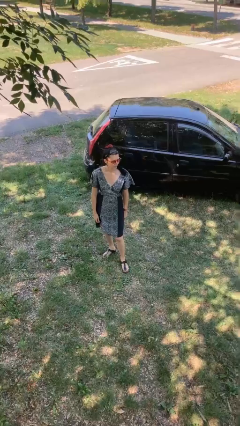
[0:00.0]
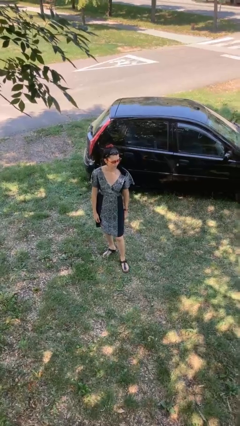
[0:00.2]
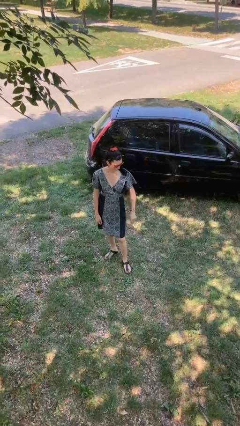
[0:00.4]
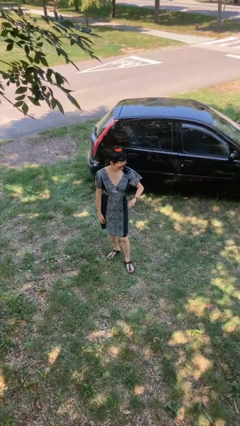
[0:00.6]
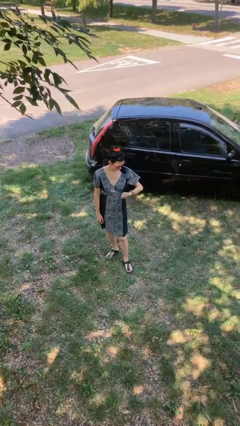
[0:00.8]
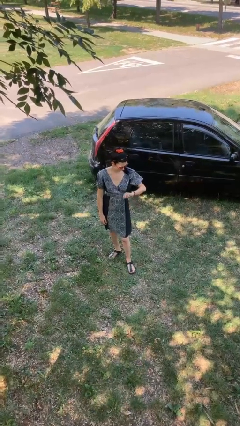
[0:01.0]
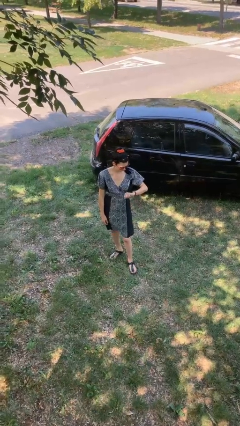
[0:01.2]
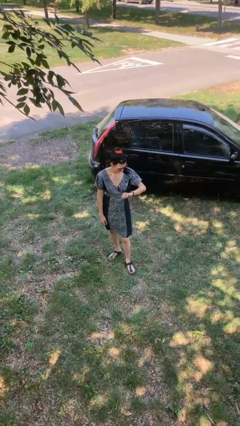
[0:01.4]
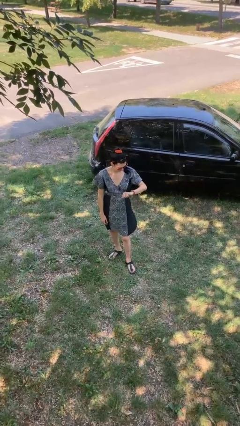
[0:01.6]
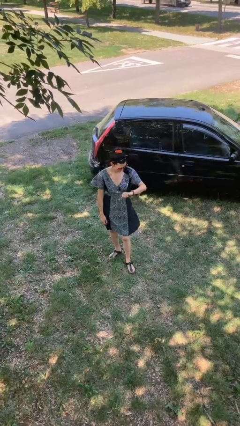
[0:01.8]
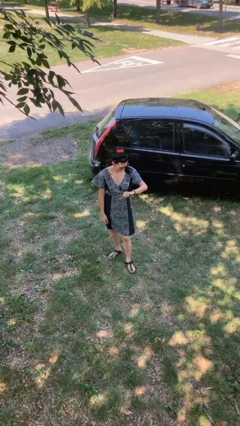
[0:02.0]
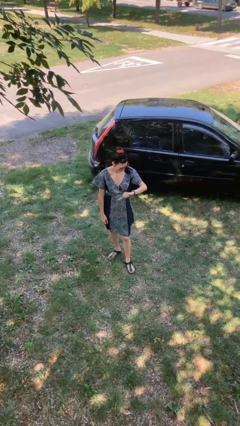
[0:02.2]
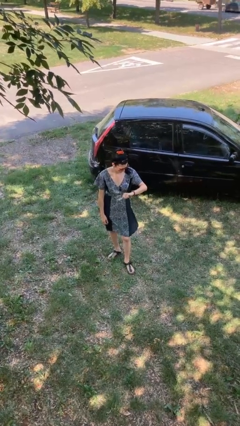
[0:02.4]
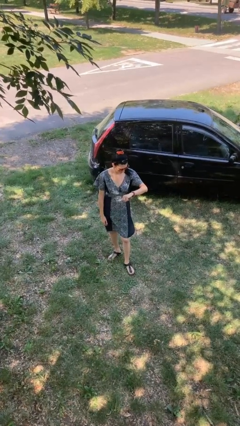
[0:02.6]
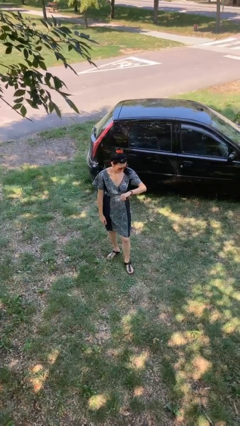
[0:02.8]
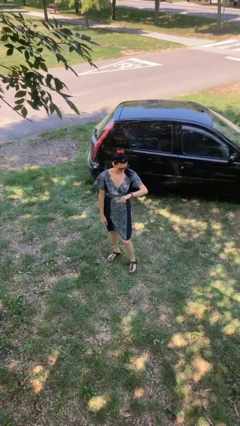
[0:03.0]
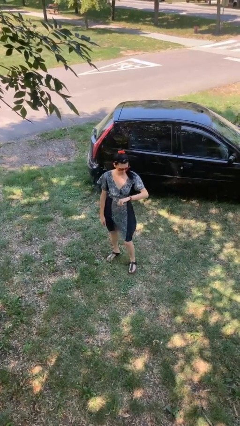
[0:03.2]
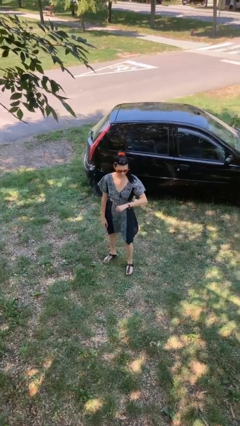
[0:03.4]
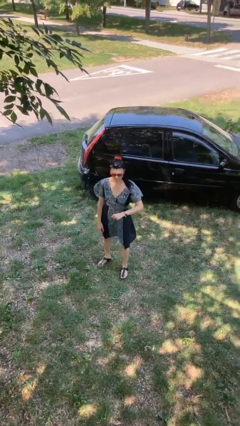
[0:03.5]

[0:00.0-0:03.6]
person looks at wristwatch

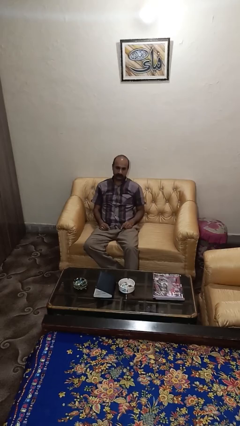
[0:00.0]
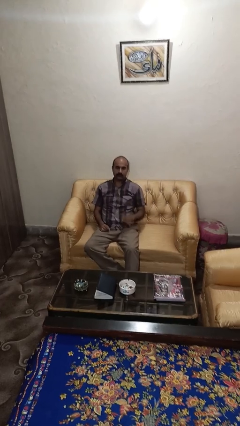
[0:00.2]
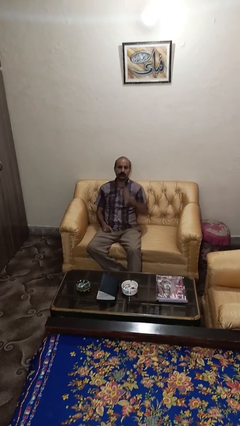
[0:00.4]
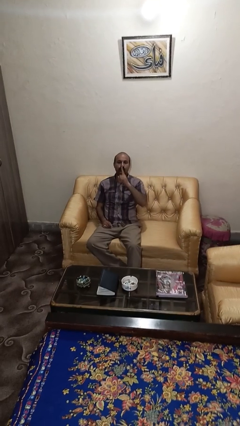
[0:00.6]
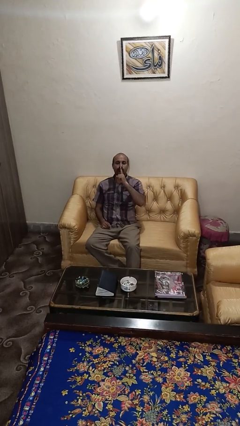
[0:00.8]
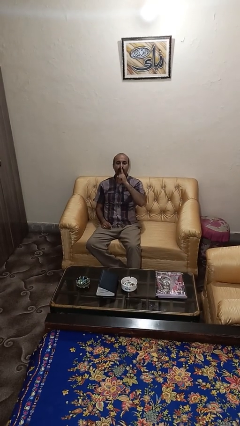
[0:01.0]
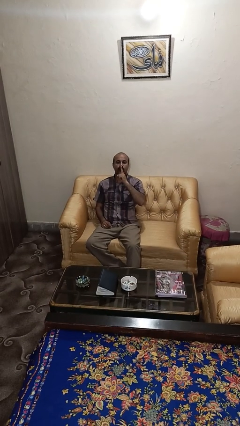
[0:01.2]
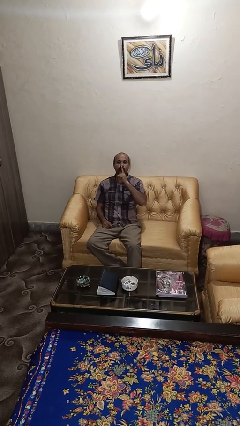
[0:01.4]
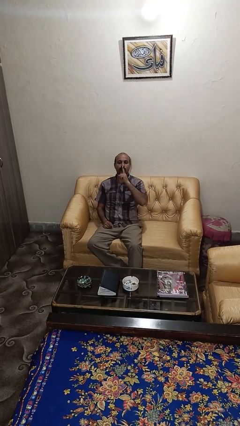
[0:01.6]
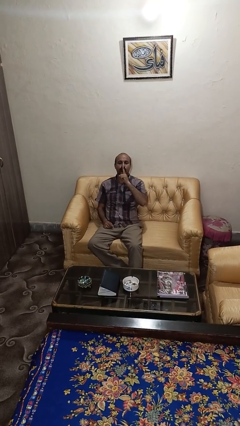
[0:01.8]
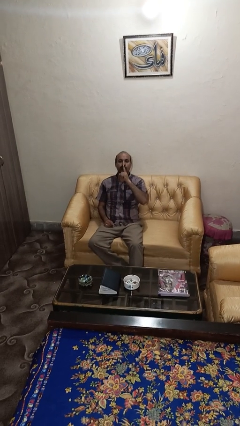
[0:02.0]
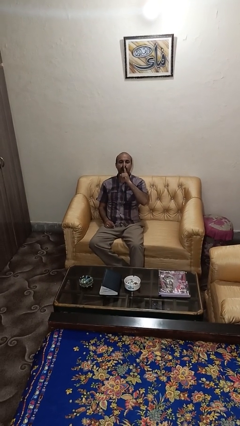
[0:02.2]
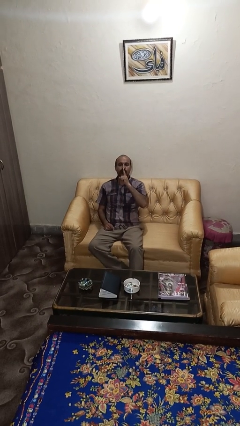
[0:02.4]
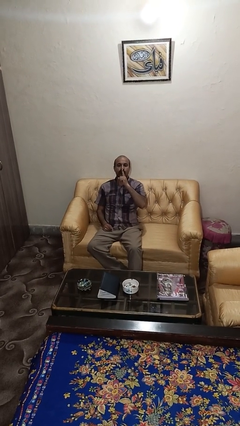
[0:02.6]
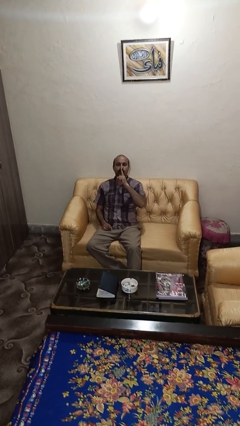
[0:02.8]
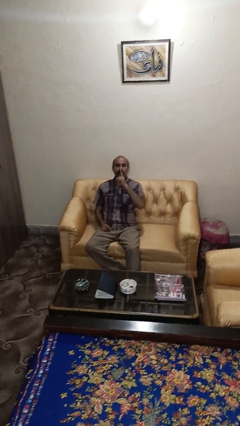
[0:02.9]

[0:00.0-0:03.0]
person gestures be quiet

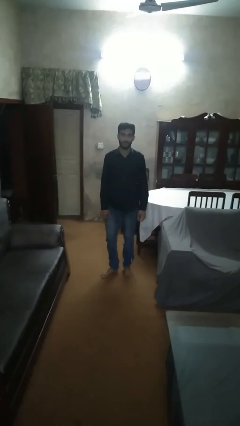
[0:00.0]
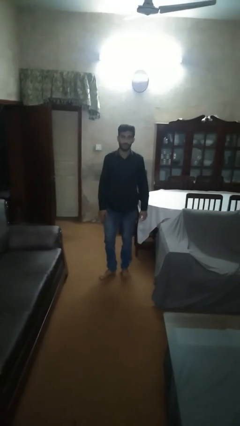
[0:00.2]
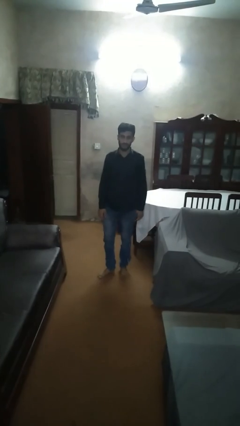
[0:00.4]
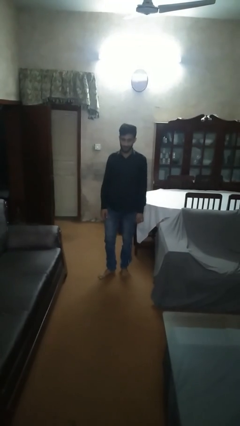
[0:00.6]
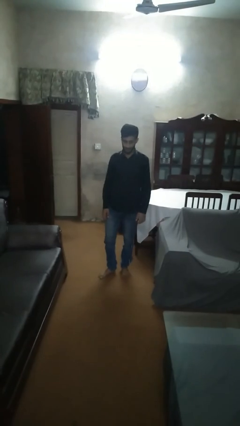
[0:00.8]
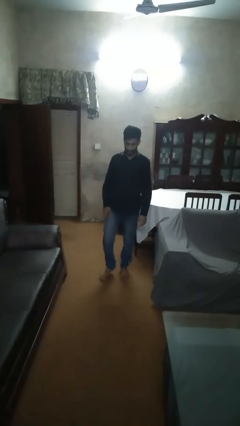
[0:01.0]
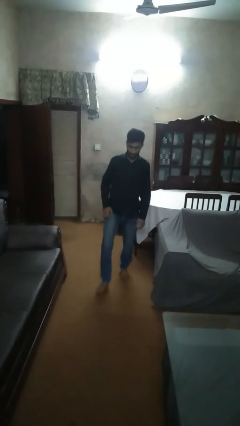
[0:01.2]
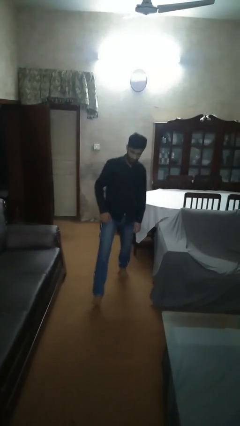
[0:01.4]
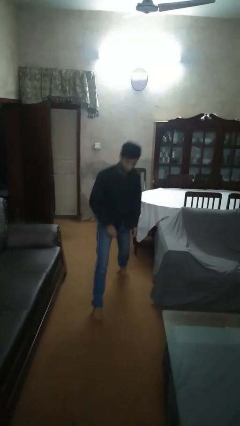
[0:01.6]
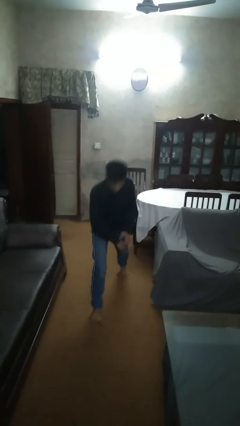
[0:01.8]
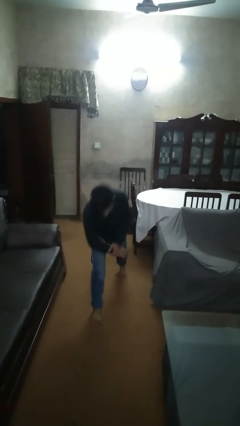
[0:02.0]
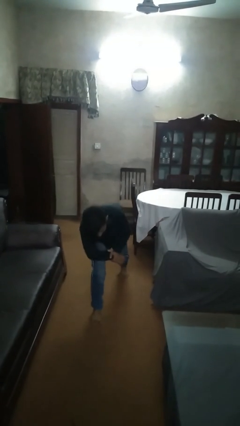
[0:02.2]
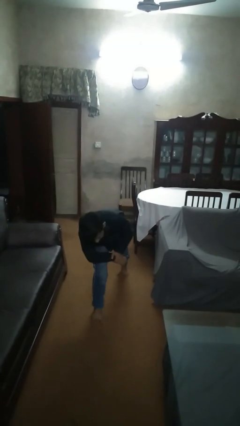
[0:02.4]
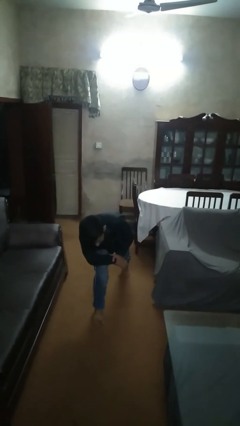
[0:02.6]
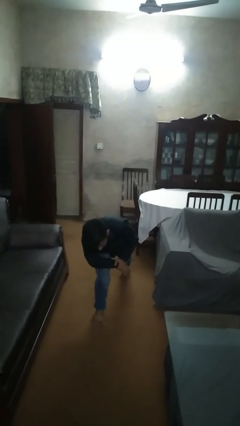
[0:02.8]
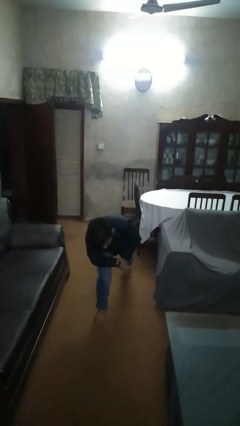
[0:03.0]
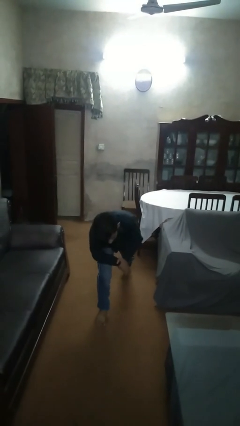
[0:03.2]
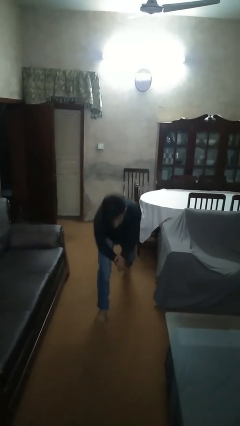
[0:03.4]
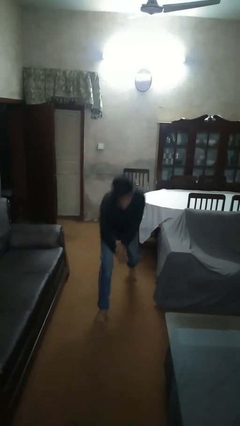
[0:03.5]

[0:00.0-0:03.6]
person exercises with lunges

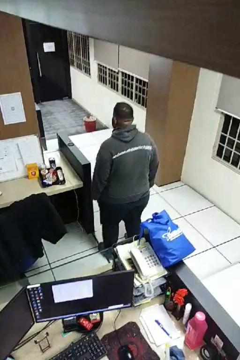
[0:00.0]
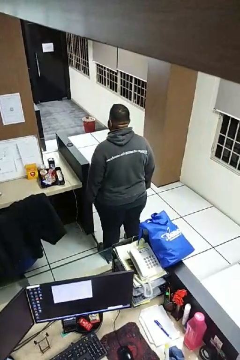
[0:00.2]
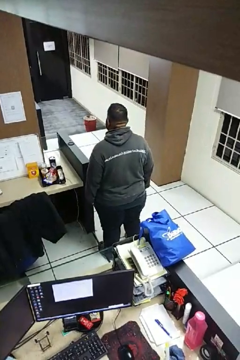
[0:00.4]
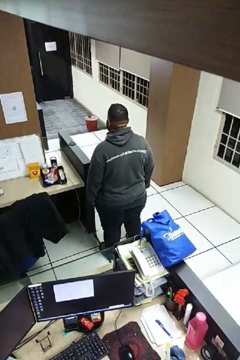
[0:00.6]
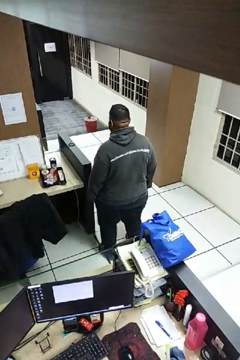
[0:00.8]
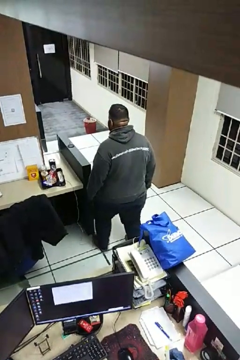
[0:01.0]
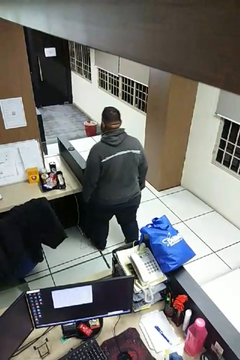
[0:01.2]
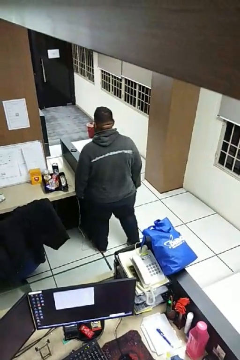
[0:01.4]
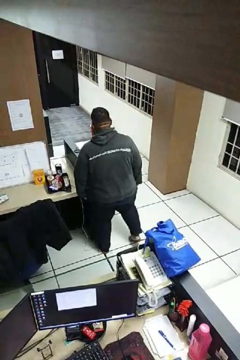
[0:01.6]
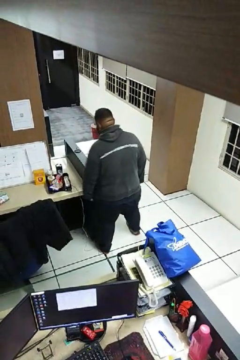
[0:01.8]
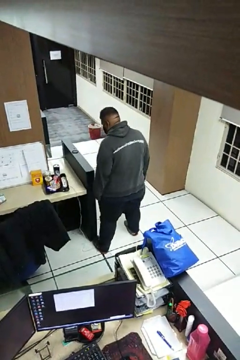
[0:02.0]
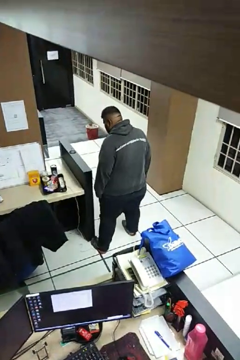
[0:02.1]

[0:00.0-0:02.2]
person bumps into table

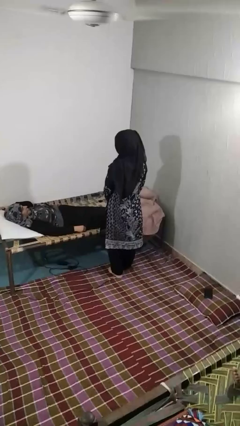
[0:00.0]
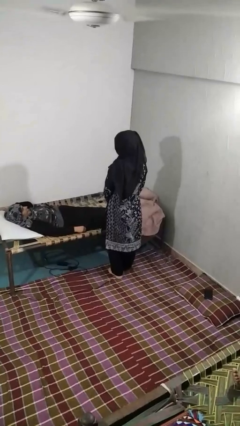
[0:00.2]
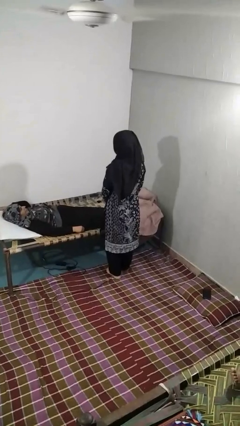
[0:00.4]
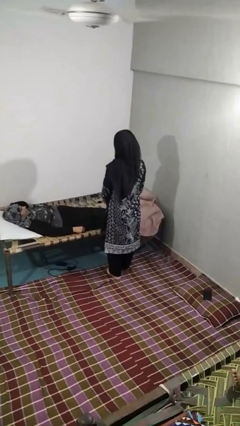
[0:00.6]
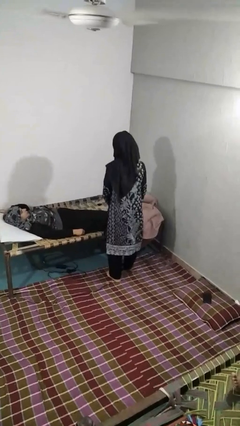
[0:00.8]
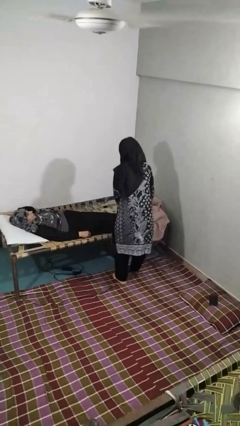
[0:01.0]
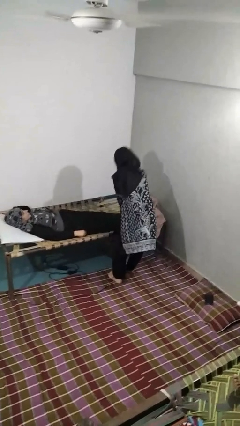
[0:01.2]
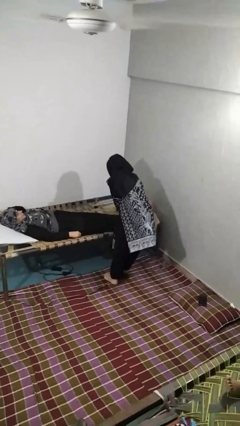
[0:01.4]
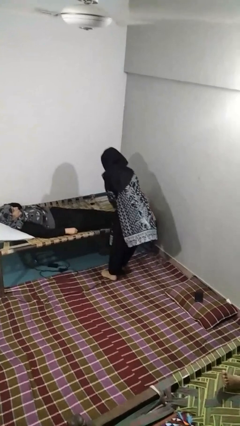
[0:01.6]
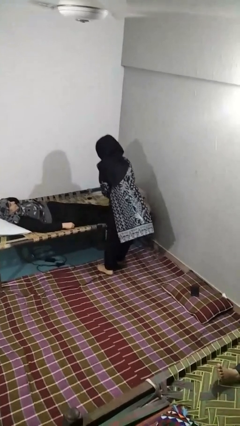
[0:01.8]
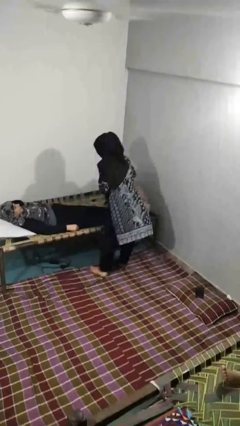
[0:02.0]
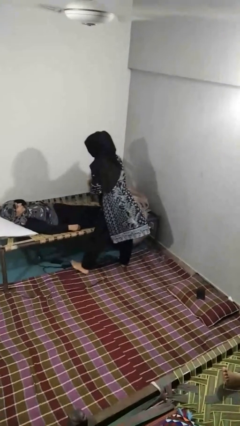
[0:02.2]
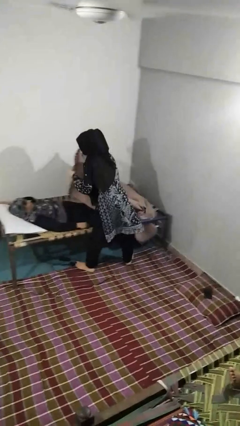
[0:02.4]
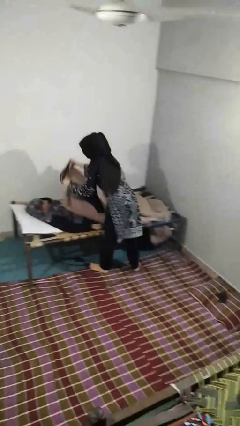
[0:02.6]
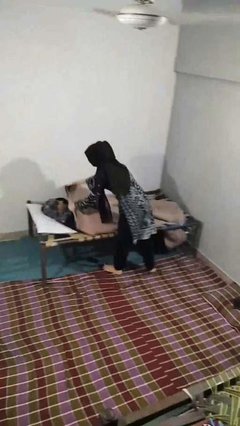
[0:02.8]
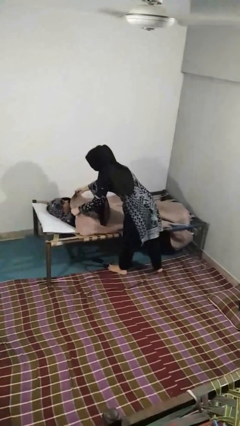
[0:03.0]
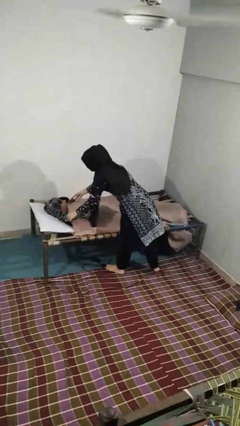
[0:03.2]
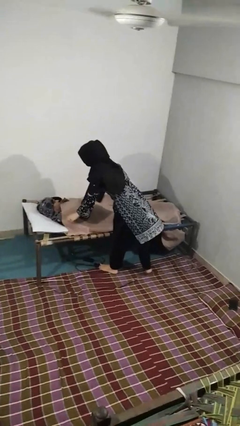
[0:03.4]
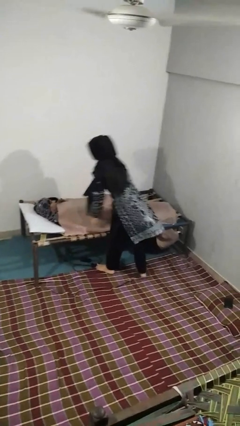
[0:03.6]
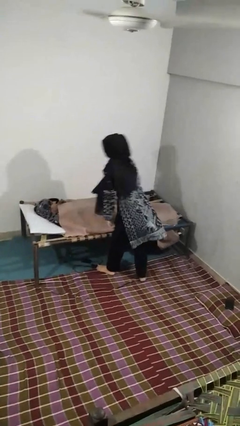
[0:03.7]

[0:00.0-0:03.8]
person covers friend with blanket

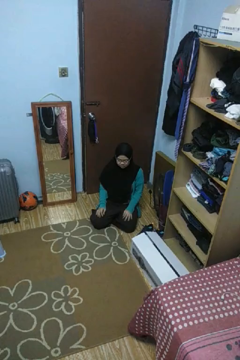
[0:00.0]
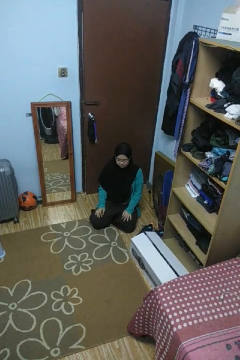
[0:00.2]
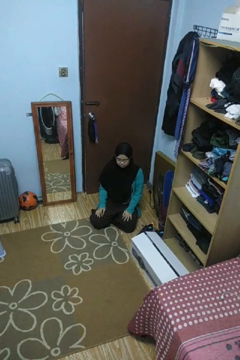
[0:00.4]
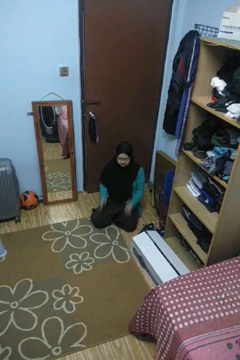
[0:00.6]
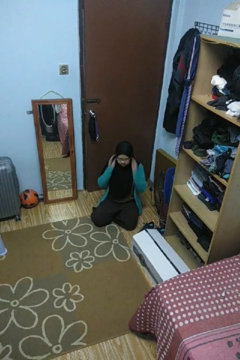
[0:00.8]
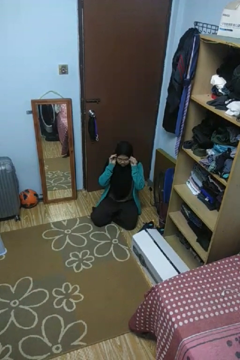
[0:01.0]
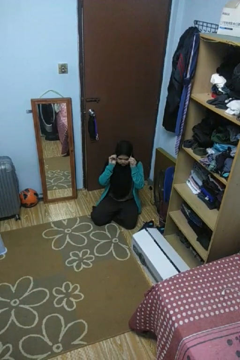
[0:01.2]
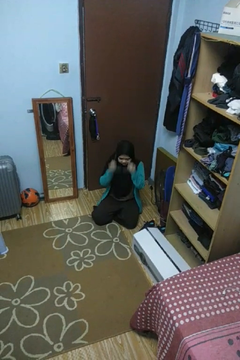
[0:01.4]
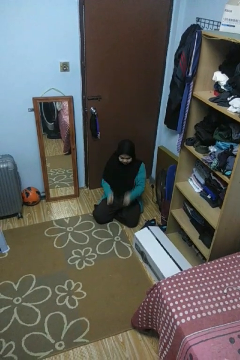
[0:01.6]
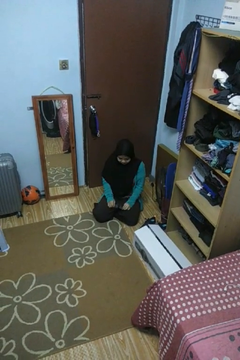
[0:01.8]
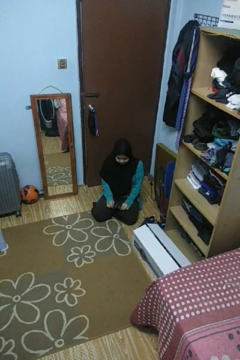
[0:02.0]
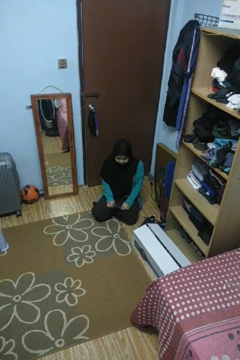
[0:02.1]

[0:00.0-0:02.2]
person takes off glasses
